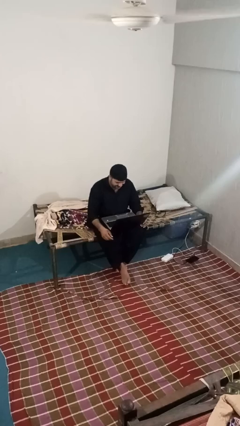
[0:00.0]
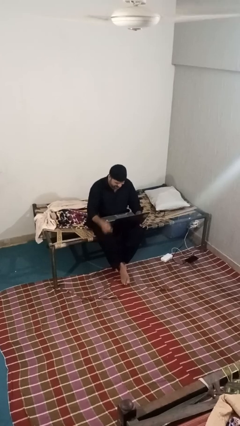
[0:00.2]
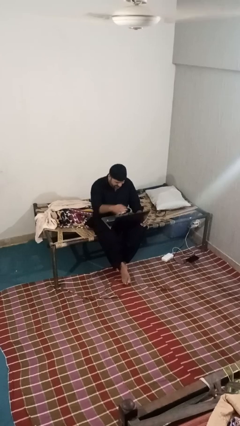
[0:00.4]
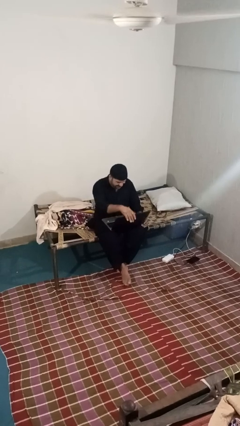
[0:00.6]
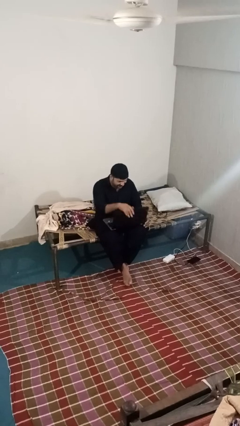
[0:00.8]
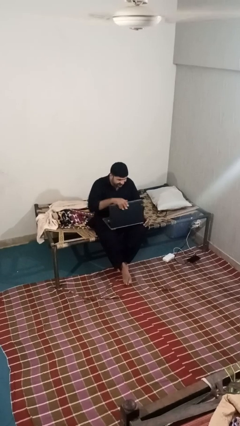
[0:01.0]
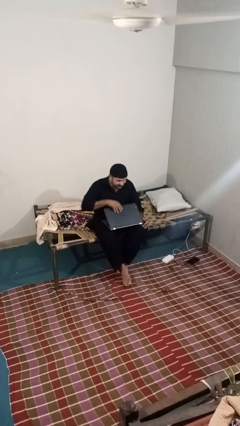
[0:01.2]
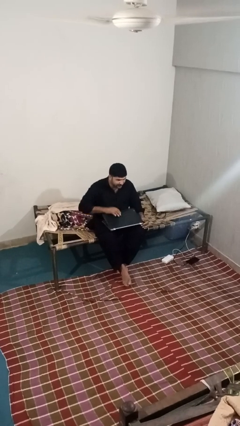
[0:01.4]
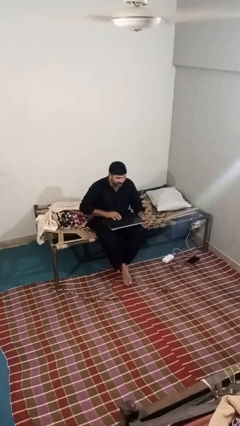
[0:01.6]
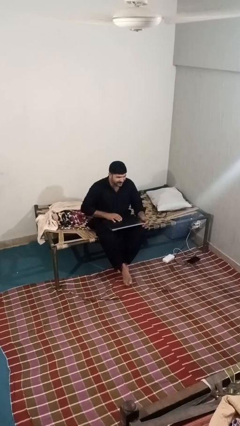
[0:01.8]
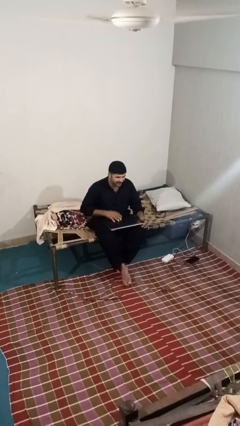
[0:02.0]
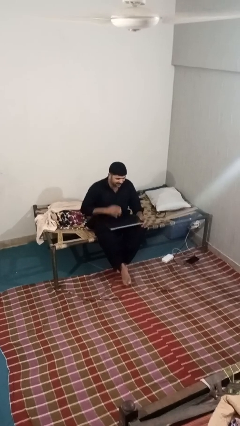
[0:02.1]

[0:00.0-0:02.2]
person closes laptop

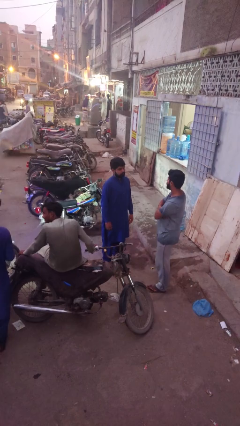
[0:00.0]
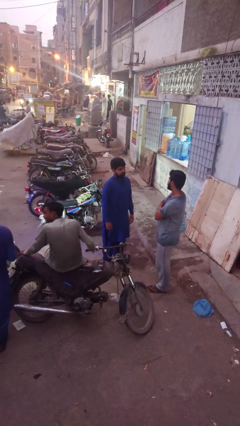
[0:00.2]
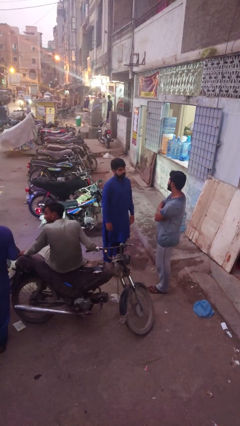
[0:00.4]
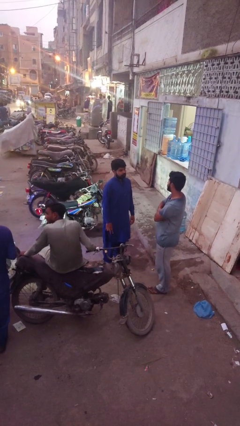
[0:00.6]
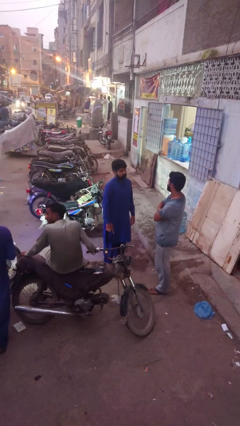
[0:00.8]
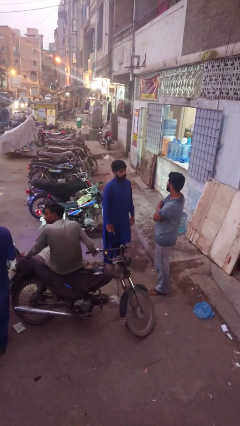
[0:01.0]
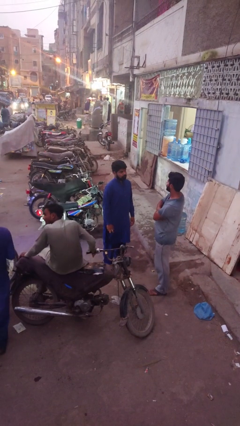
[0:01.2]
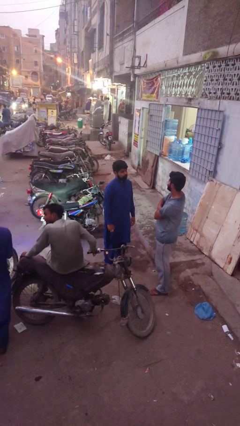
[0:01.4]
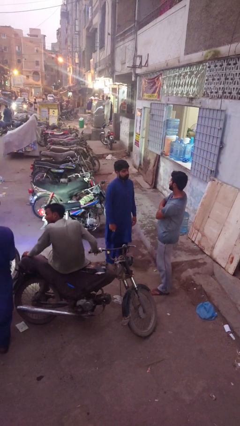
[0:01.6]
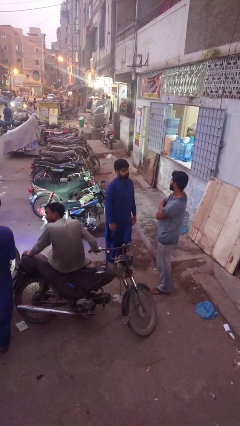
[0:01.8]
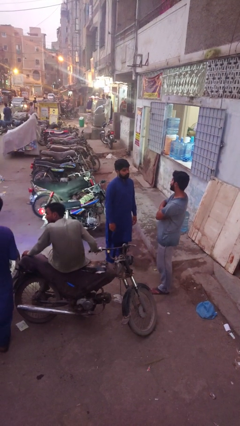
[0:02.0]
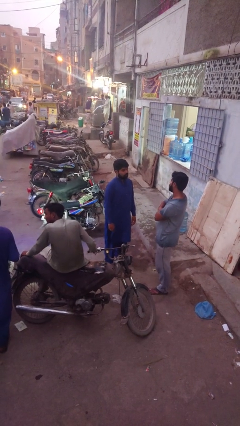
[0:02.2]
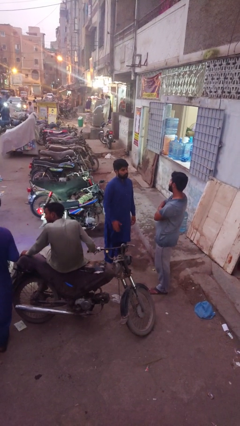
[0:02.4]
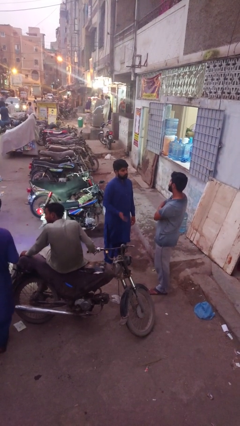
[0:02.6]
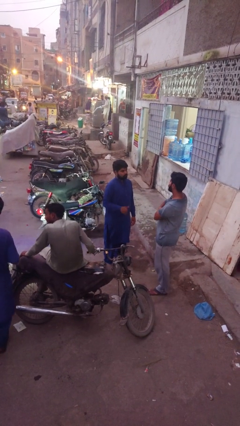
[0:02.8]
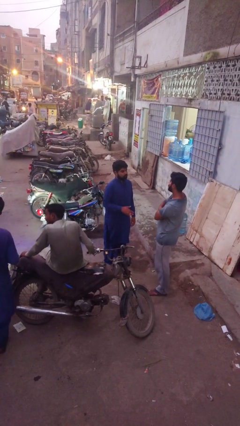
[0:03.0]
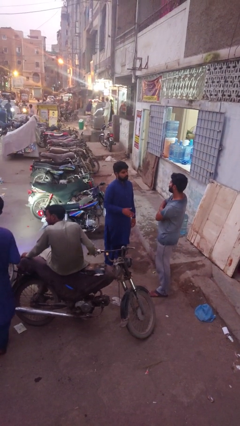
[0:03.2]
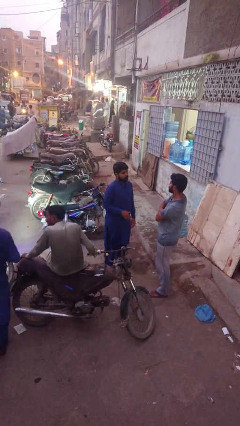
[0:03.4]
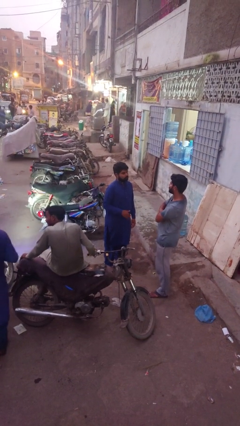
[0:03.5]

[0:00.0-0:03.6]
person talks to person

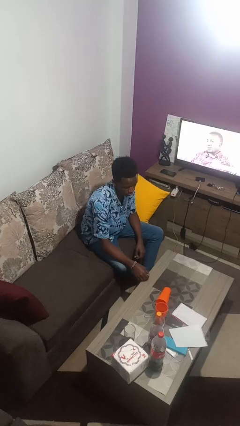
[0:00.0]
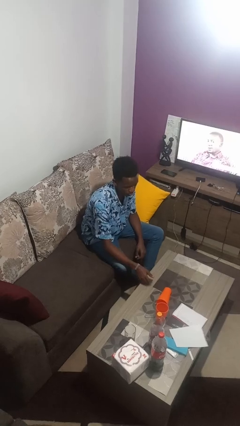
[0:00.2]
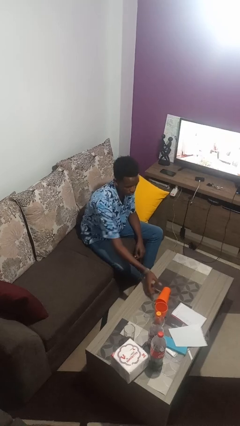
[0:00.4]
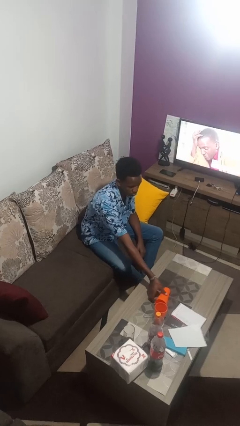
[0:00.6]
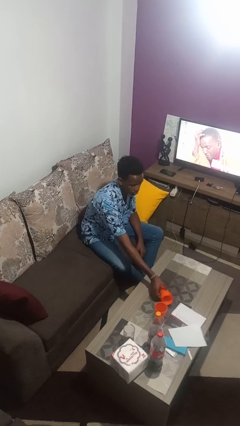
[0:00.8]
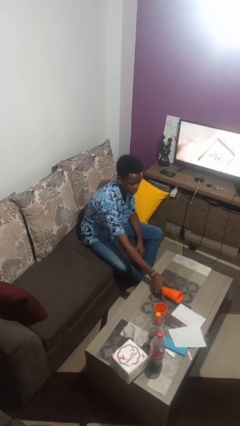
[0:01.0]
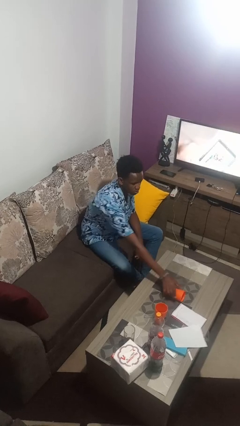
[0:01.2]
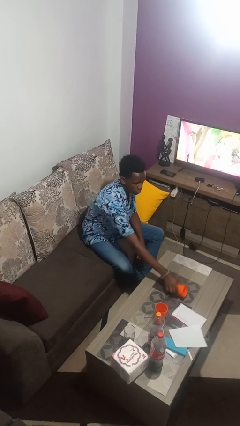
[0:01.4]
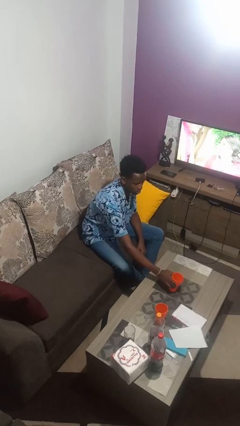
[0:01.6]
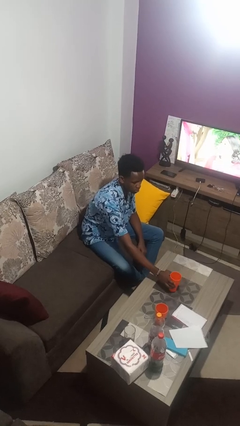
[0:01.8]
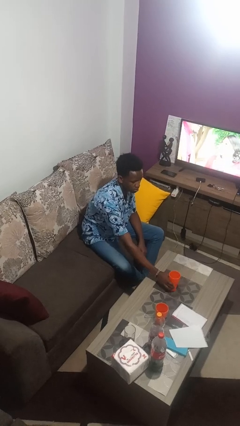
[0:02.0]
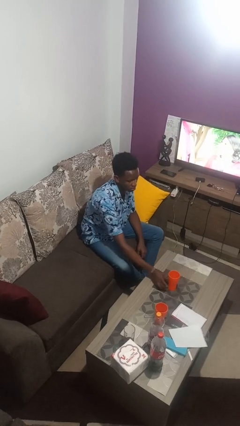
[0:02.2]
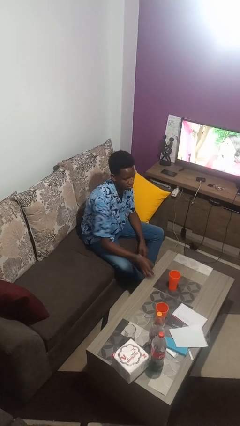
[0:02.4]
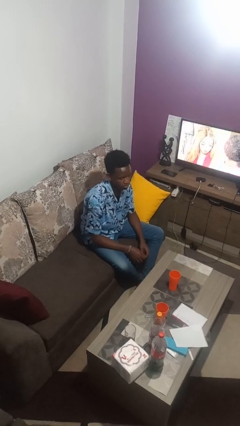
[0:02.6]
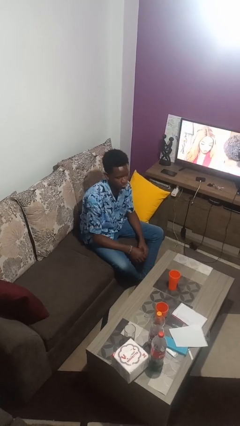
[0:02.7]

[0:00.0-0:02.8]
person sets upright glass

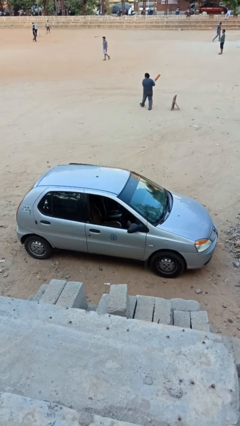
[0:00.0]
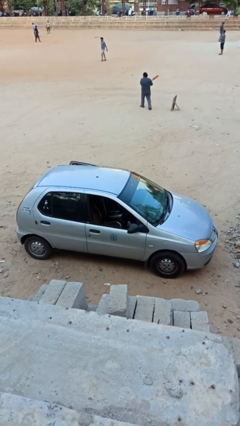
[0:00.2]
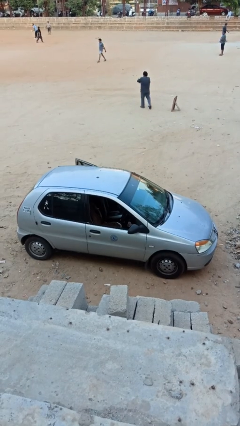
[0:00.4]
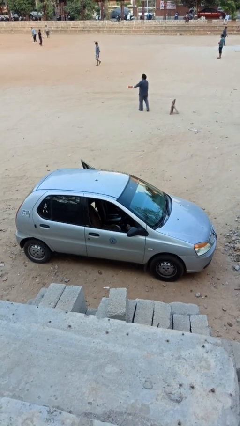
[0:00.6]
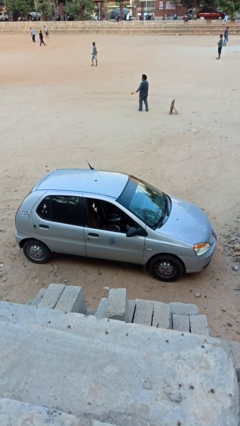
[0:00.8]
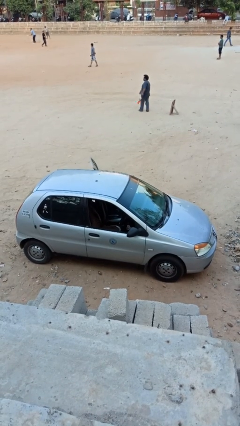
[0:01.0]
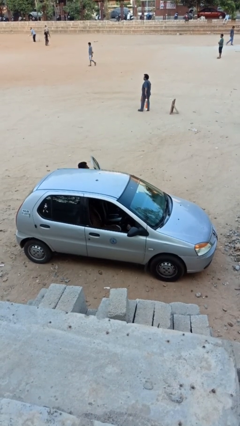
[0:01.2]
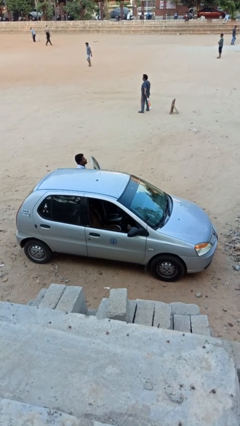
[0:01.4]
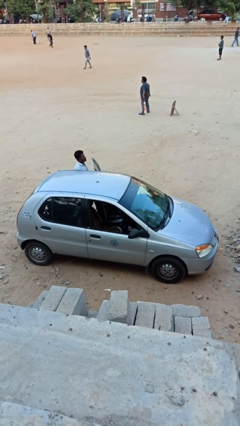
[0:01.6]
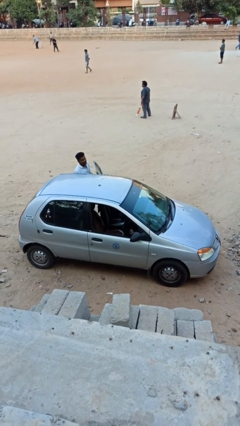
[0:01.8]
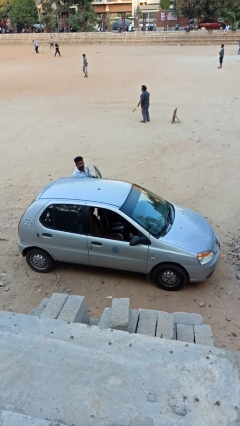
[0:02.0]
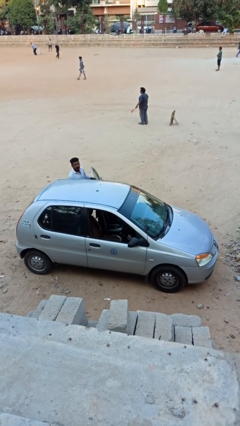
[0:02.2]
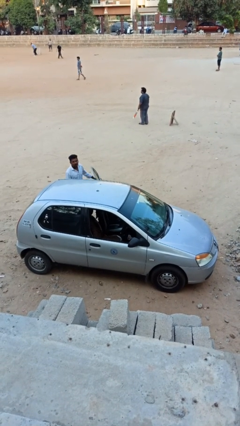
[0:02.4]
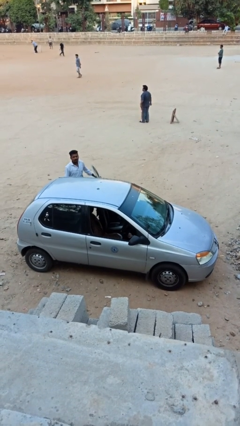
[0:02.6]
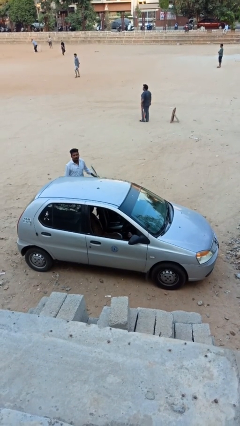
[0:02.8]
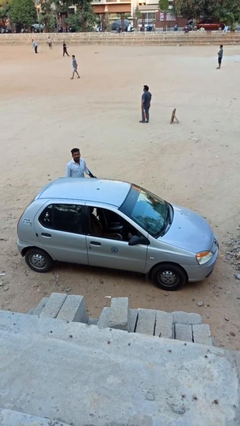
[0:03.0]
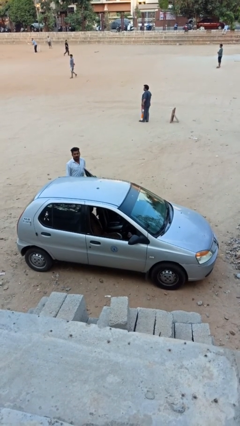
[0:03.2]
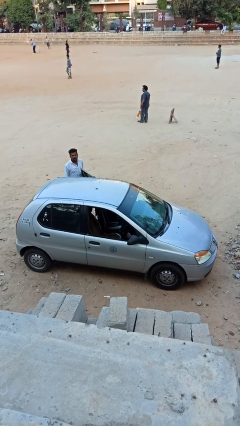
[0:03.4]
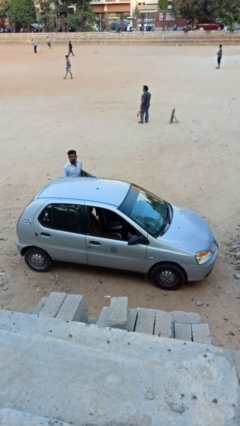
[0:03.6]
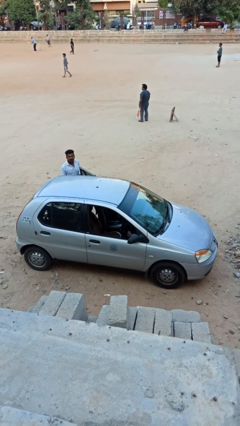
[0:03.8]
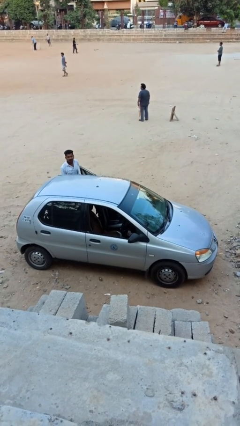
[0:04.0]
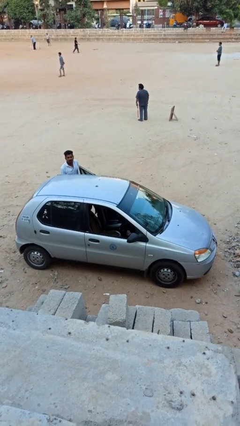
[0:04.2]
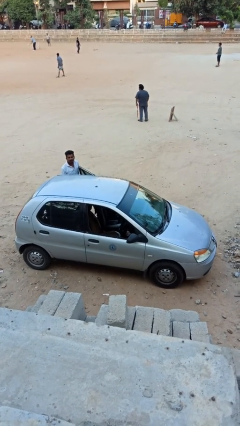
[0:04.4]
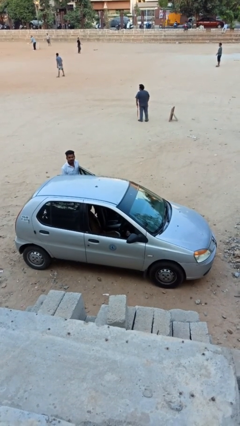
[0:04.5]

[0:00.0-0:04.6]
car drops off person

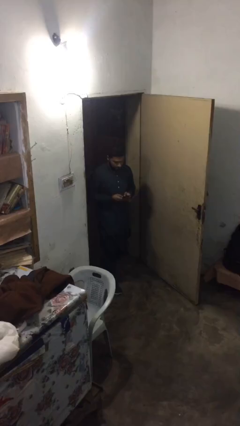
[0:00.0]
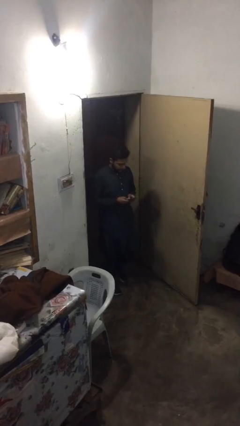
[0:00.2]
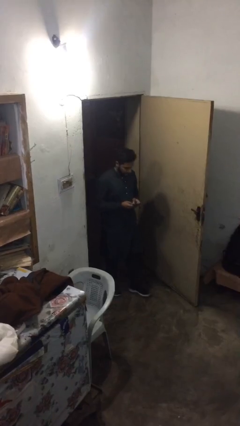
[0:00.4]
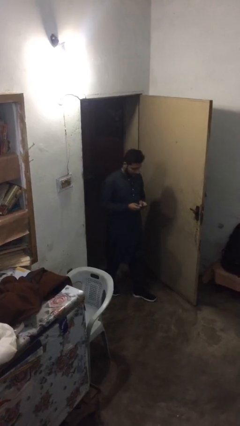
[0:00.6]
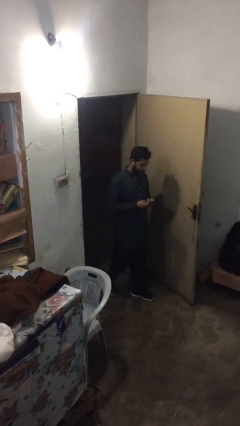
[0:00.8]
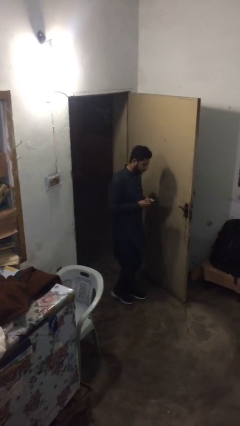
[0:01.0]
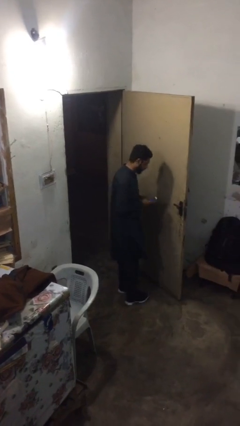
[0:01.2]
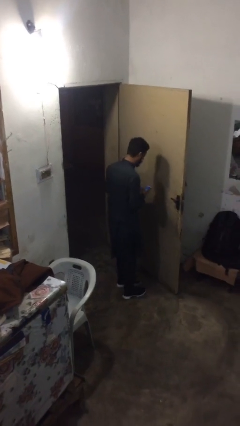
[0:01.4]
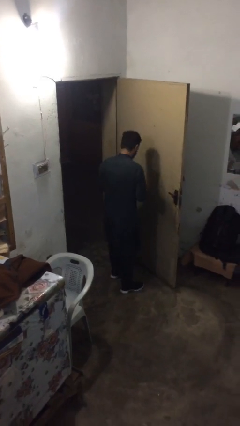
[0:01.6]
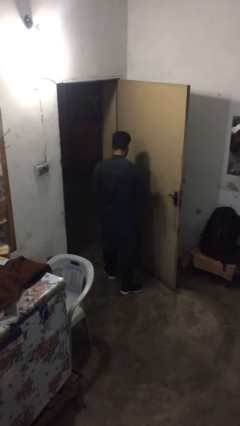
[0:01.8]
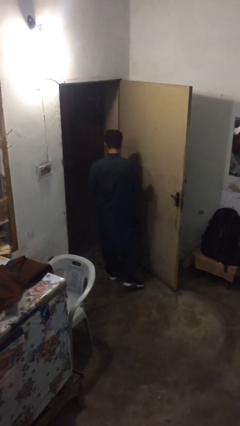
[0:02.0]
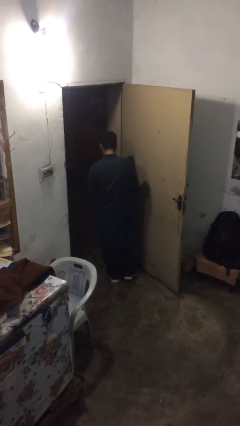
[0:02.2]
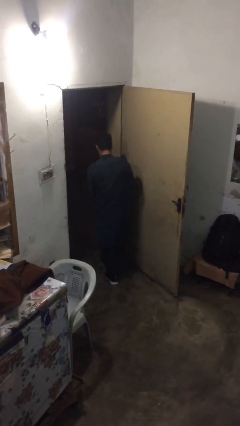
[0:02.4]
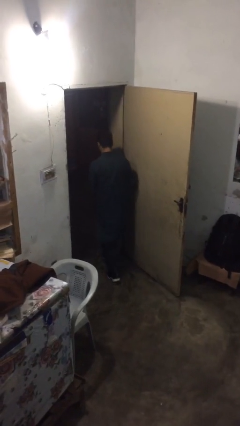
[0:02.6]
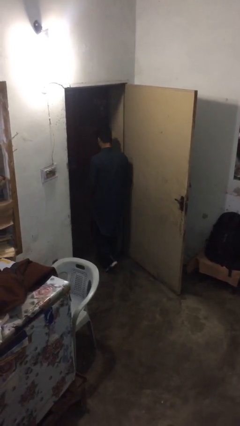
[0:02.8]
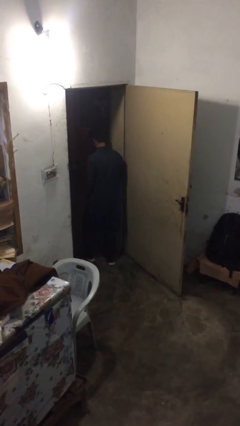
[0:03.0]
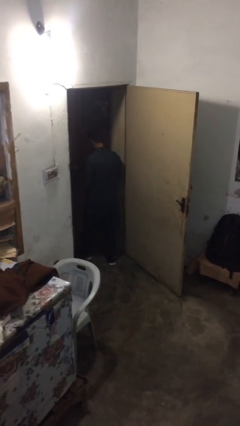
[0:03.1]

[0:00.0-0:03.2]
person exits scene through structure

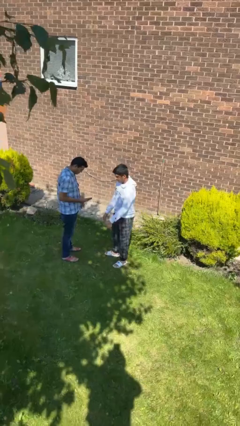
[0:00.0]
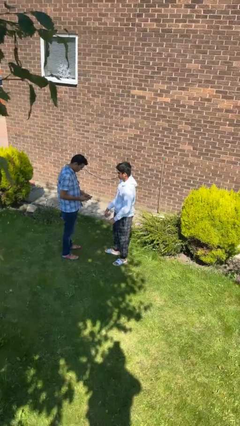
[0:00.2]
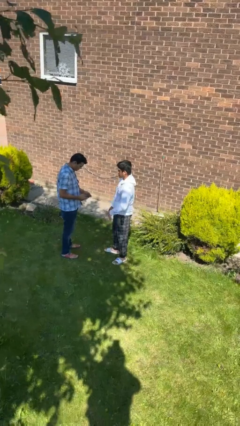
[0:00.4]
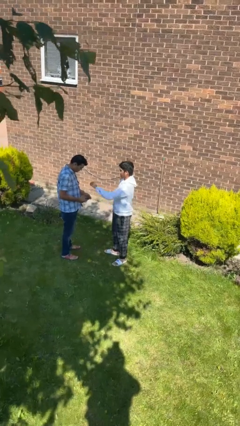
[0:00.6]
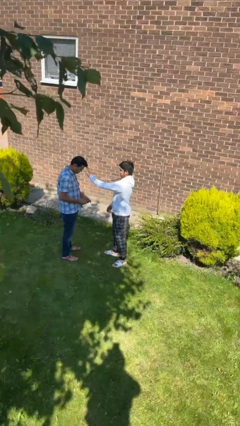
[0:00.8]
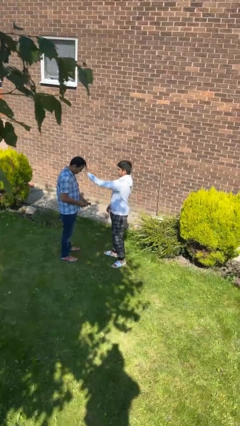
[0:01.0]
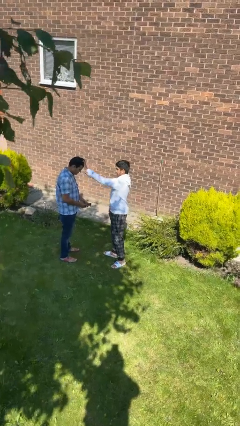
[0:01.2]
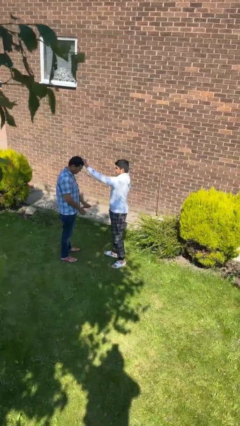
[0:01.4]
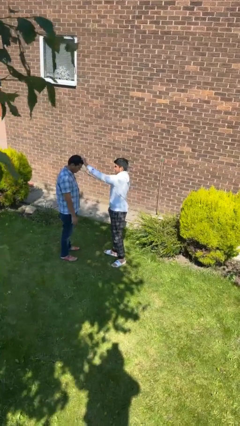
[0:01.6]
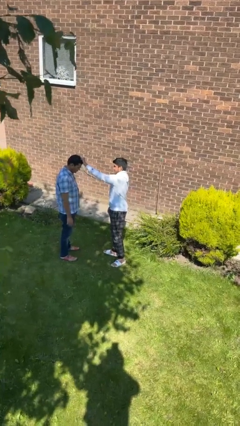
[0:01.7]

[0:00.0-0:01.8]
person grabs person by hair
